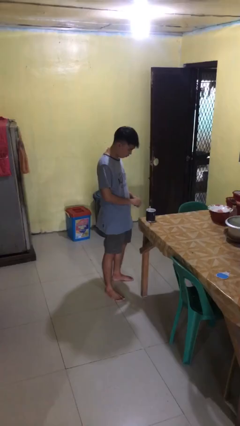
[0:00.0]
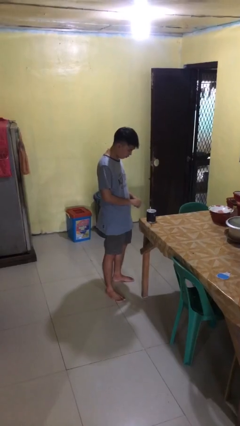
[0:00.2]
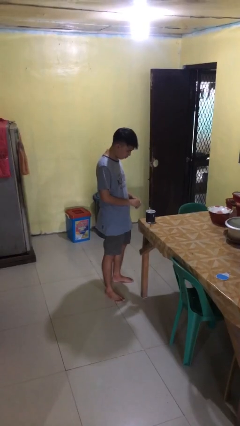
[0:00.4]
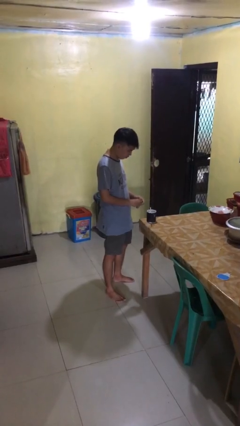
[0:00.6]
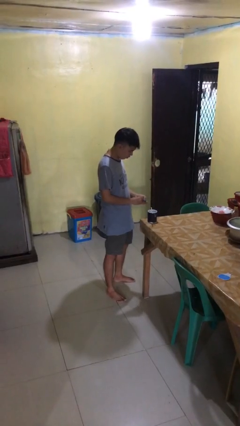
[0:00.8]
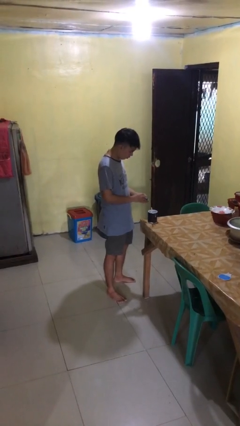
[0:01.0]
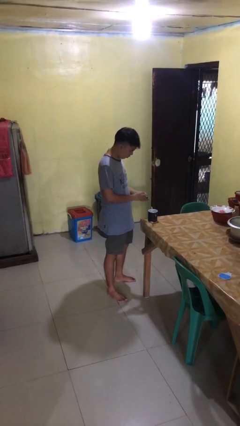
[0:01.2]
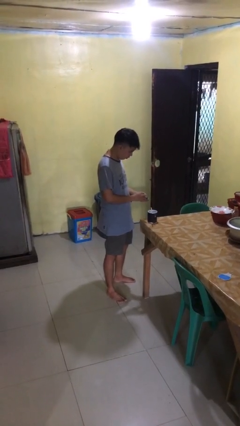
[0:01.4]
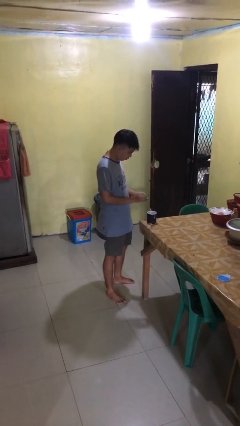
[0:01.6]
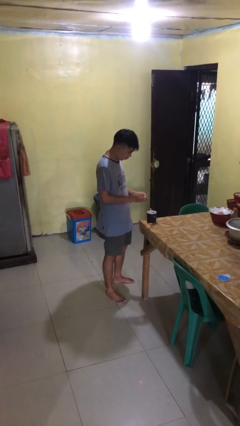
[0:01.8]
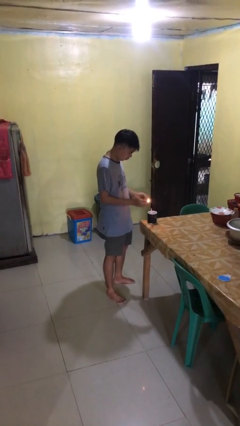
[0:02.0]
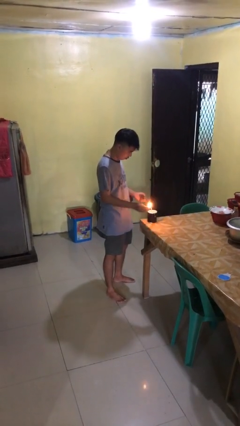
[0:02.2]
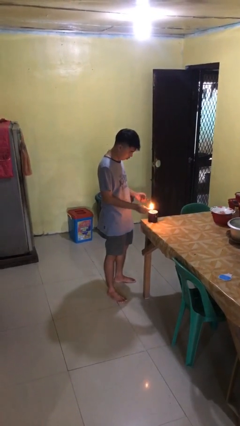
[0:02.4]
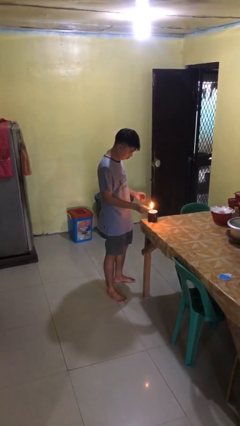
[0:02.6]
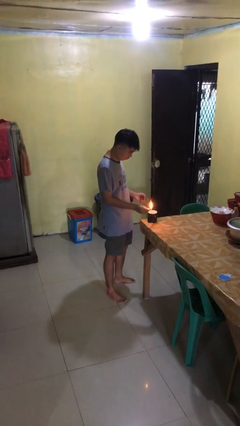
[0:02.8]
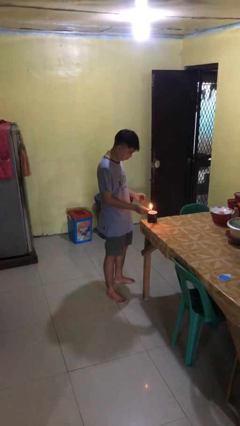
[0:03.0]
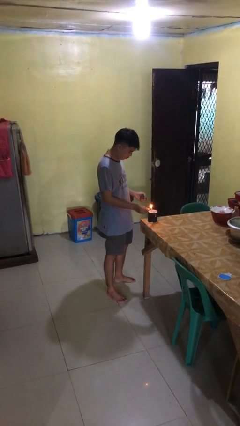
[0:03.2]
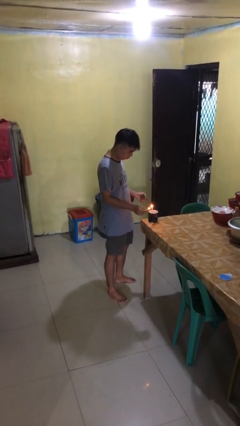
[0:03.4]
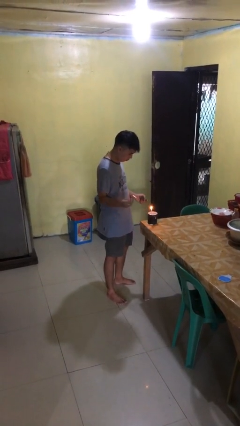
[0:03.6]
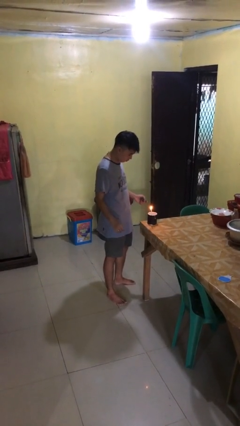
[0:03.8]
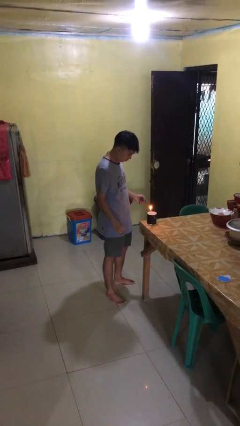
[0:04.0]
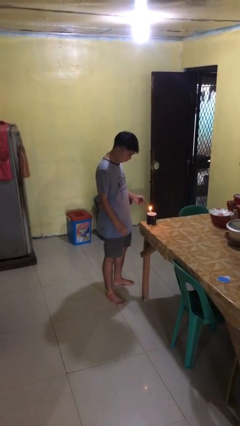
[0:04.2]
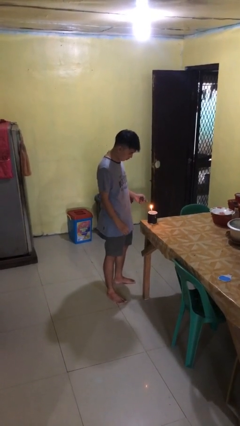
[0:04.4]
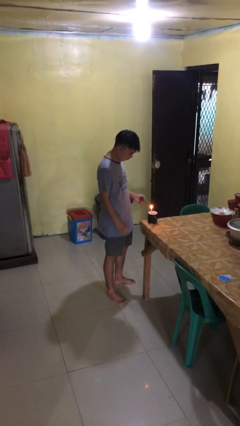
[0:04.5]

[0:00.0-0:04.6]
person lights candle

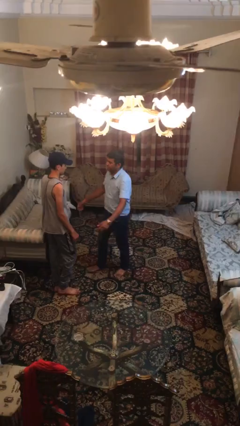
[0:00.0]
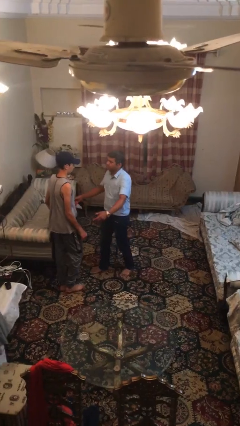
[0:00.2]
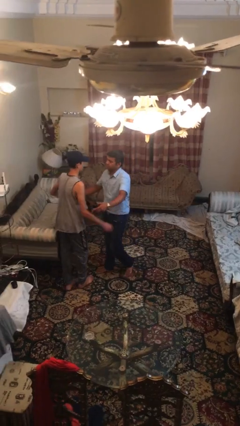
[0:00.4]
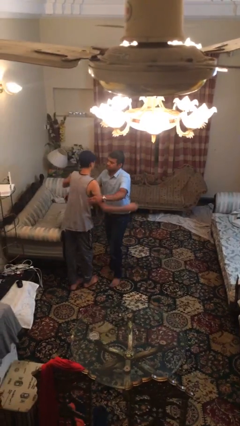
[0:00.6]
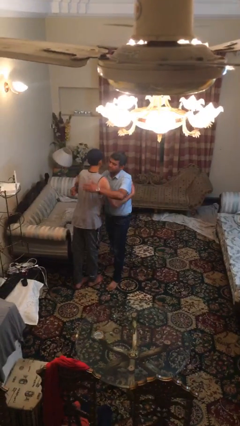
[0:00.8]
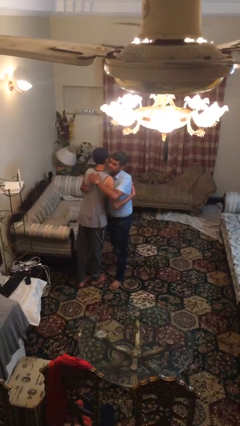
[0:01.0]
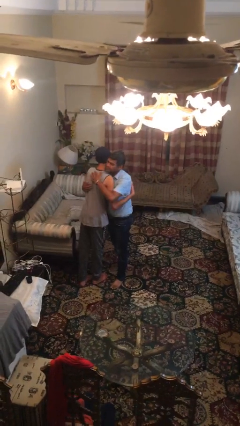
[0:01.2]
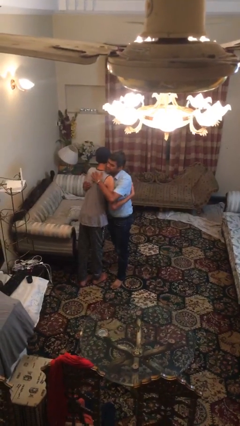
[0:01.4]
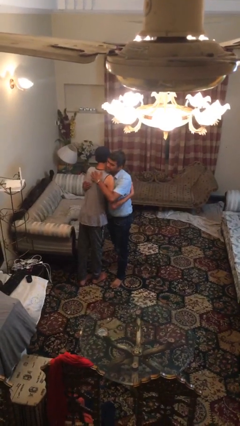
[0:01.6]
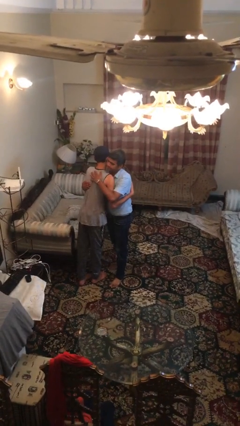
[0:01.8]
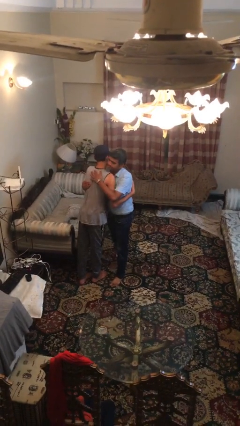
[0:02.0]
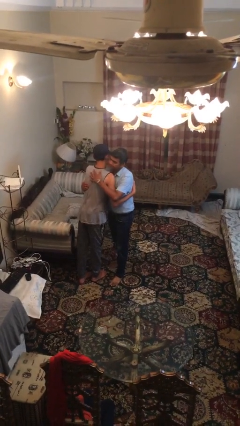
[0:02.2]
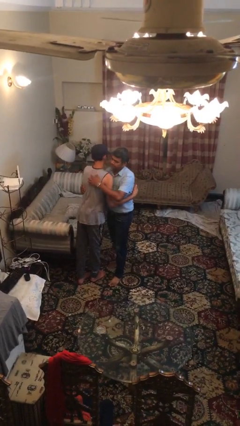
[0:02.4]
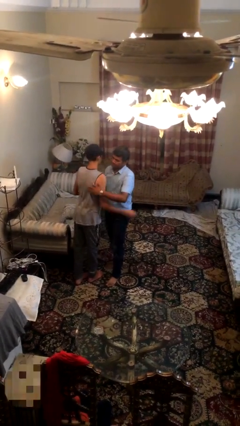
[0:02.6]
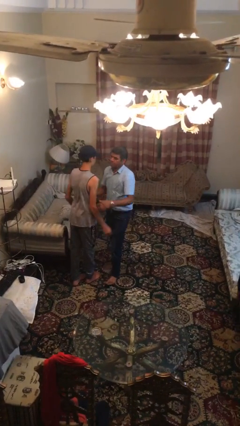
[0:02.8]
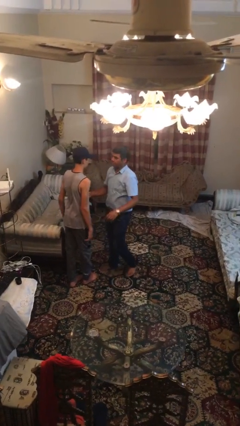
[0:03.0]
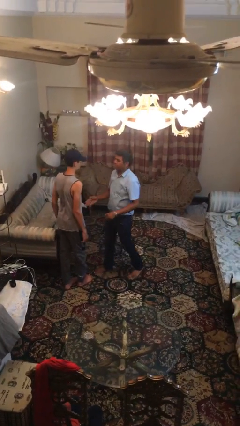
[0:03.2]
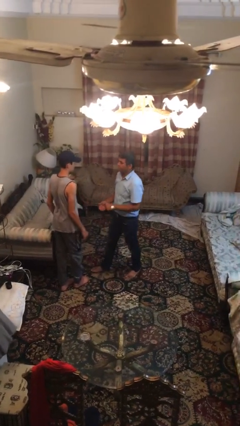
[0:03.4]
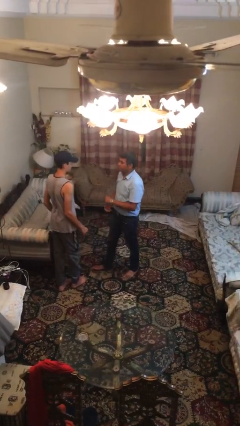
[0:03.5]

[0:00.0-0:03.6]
person embraces person

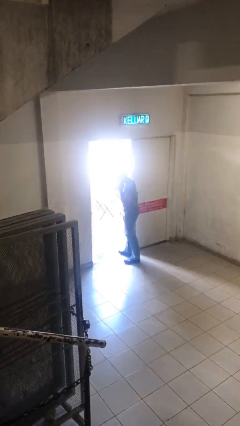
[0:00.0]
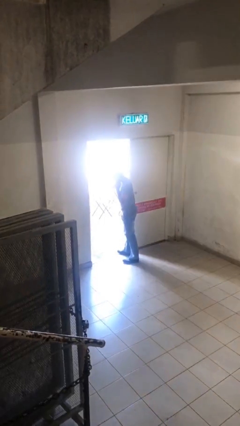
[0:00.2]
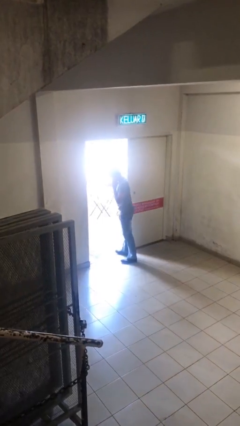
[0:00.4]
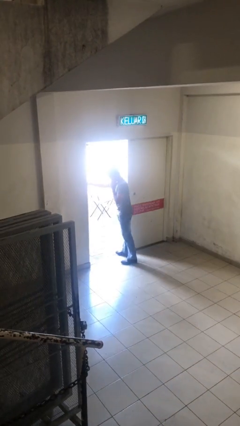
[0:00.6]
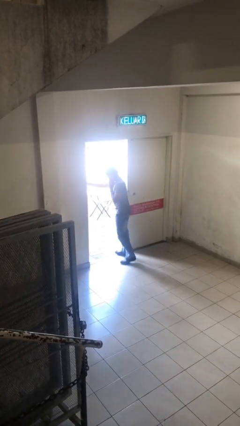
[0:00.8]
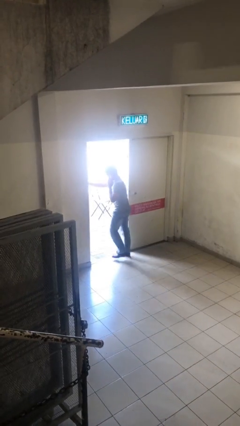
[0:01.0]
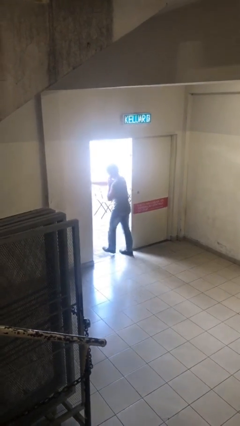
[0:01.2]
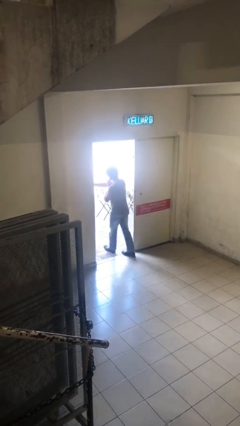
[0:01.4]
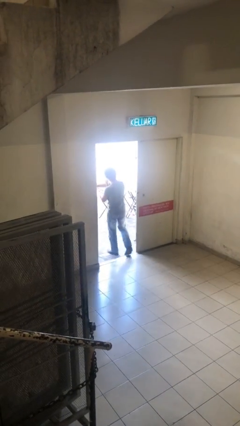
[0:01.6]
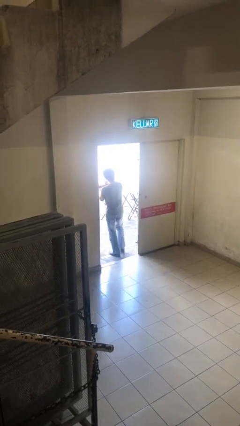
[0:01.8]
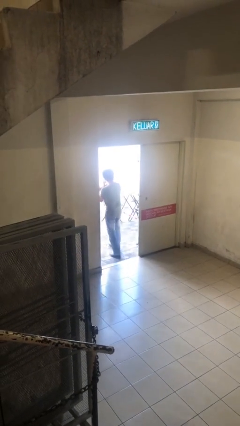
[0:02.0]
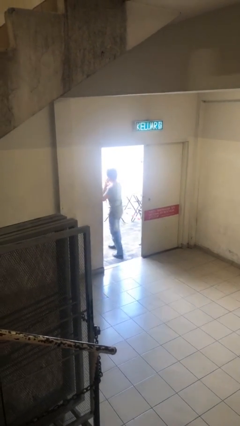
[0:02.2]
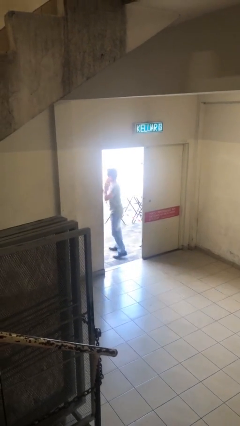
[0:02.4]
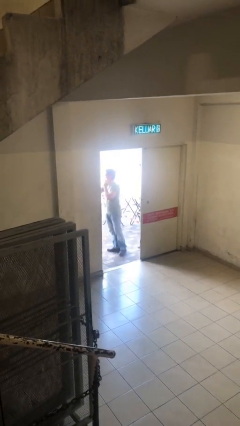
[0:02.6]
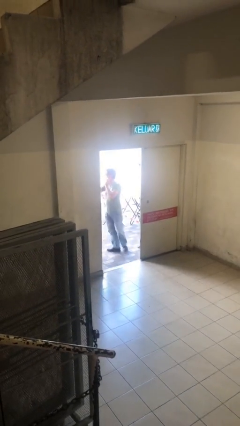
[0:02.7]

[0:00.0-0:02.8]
person exits scene through structure

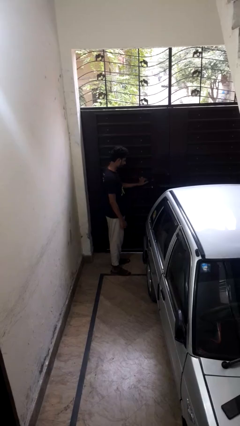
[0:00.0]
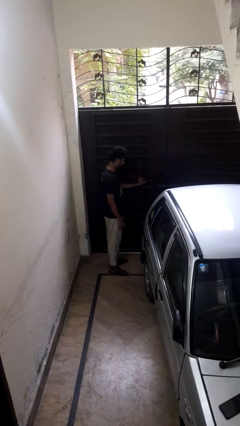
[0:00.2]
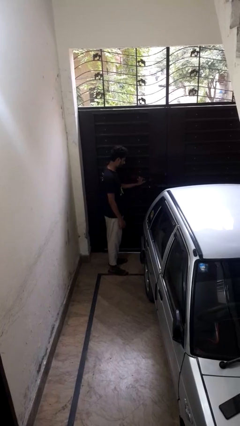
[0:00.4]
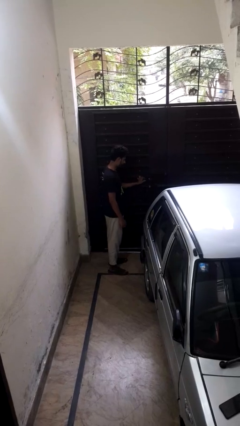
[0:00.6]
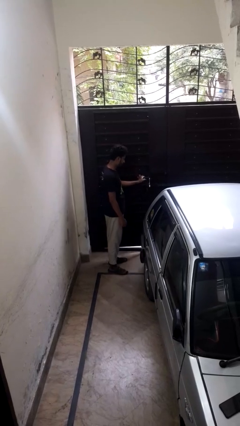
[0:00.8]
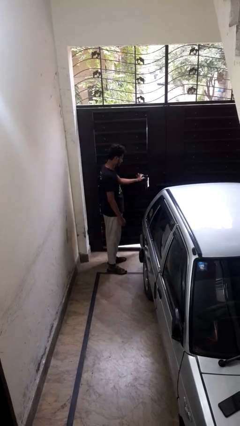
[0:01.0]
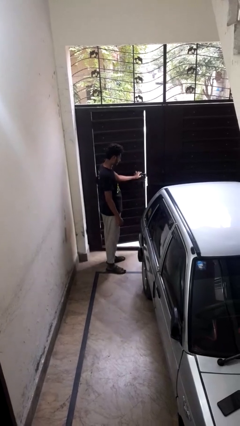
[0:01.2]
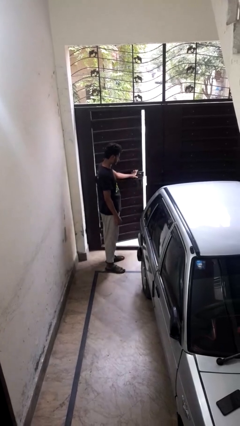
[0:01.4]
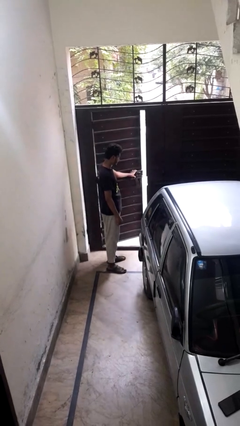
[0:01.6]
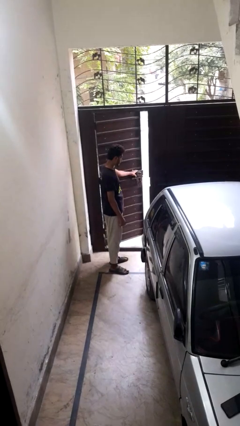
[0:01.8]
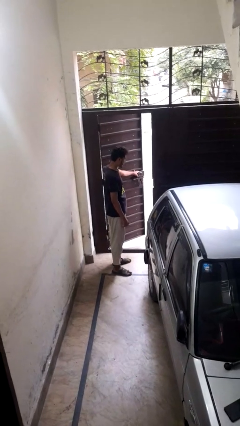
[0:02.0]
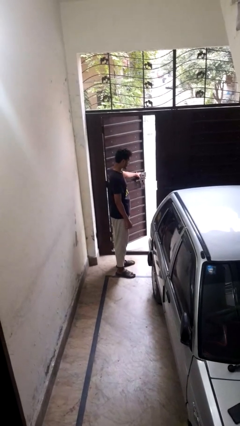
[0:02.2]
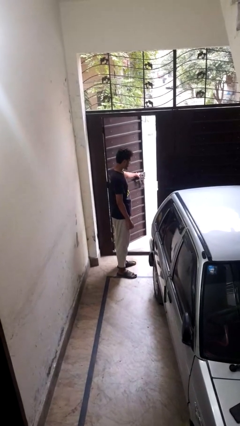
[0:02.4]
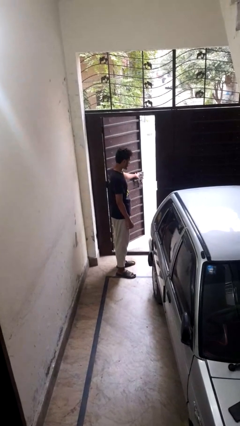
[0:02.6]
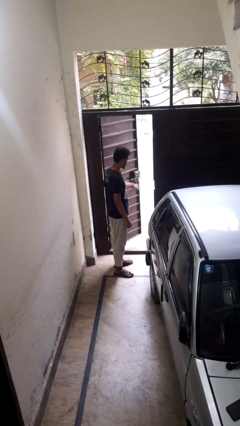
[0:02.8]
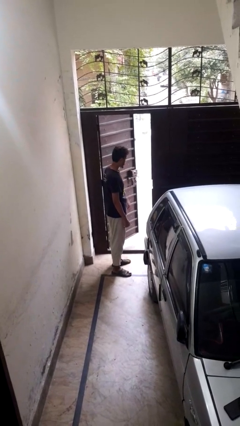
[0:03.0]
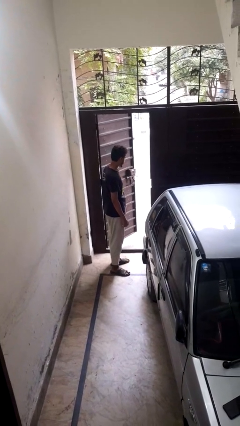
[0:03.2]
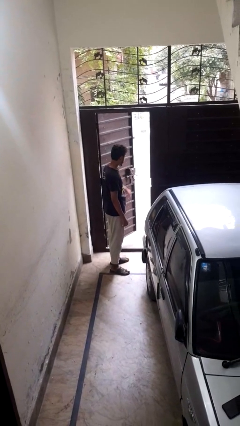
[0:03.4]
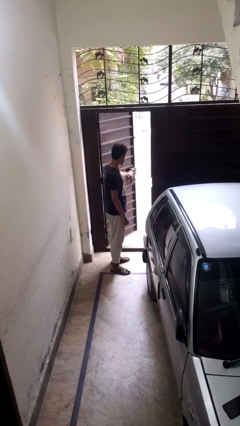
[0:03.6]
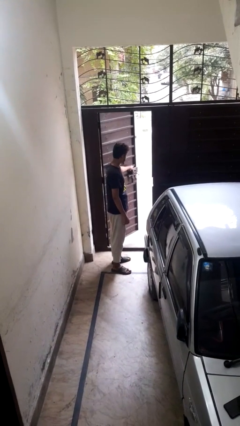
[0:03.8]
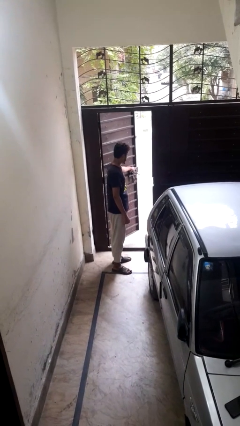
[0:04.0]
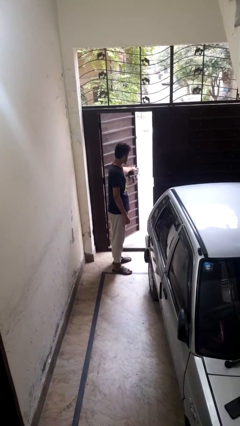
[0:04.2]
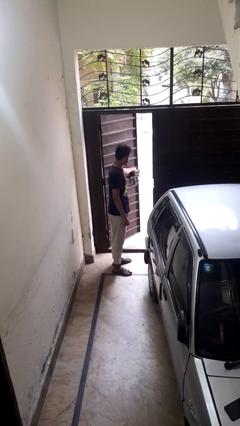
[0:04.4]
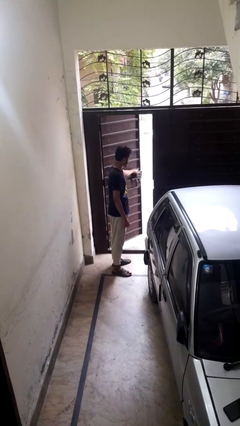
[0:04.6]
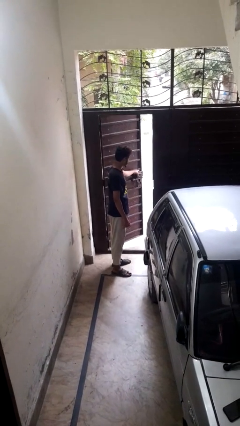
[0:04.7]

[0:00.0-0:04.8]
person opens gate

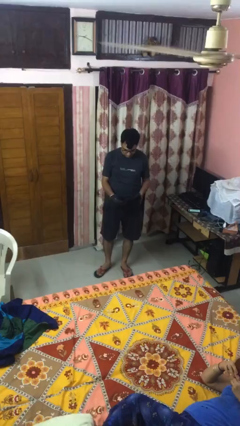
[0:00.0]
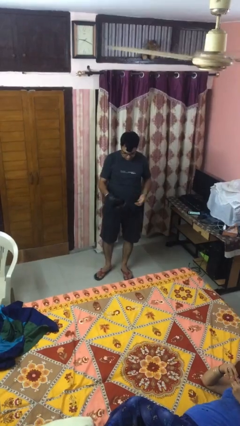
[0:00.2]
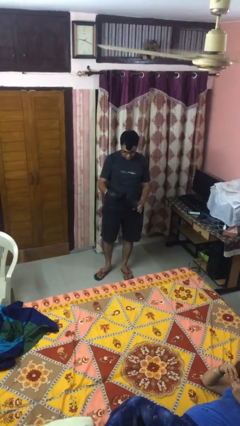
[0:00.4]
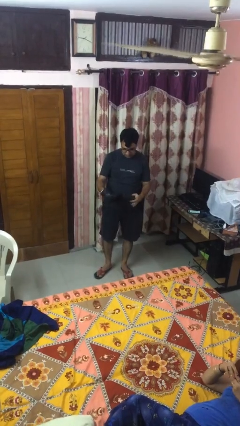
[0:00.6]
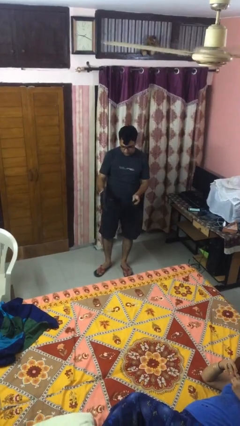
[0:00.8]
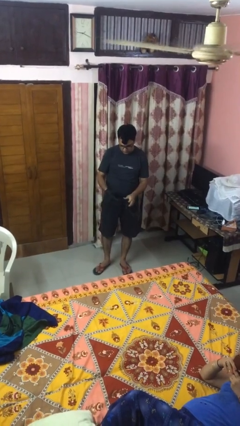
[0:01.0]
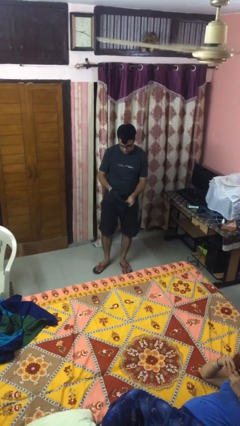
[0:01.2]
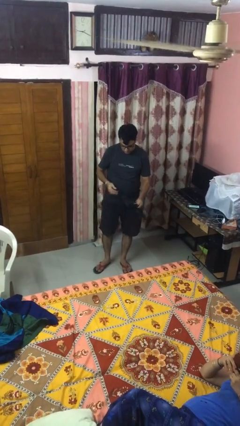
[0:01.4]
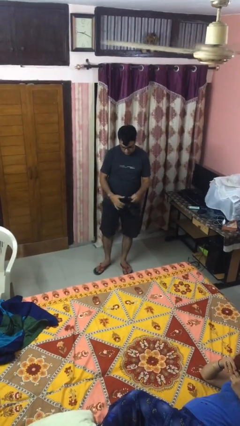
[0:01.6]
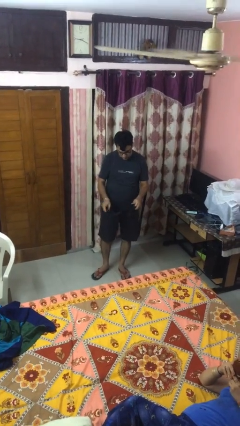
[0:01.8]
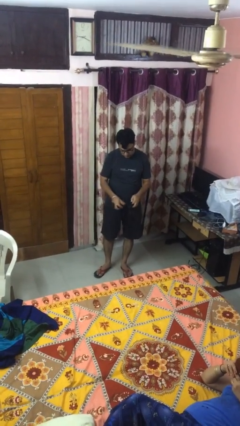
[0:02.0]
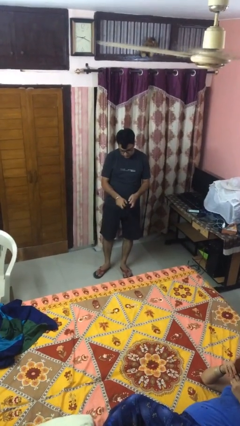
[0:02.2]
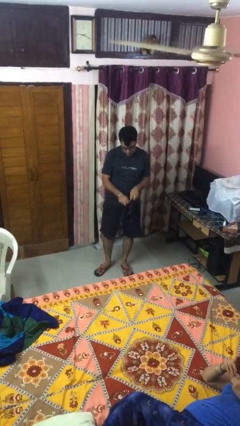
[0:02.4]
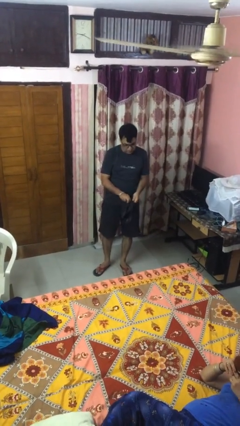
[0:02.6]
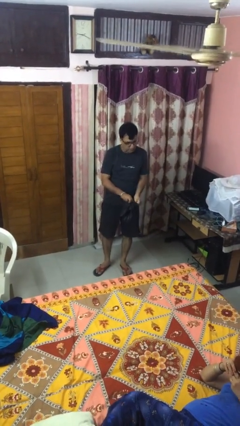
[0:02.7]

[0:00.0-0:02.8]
person takes off gloves
